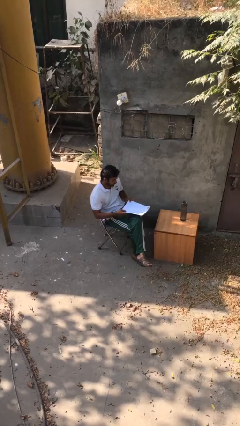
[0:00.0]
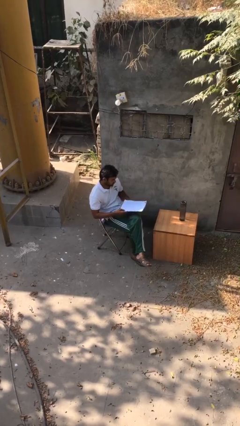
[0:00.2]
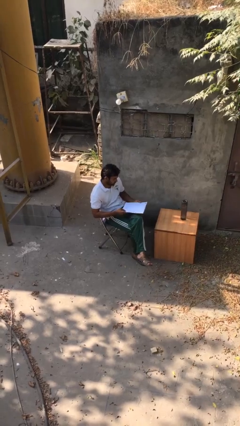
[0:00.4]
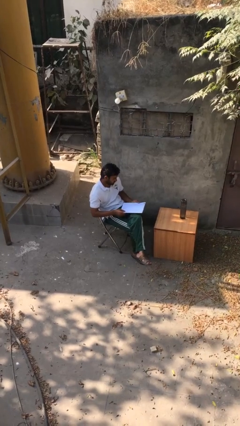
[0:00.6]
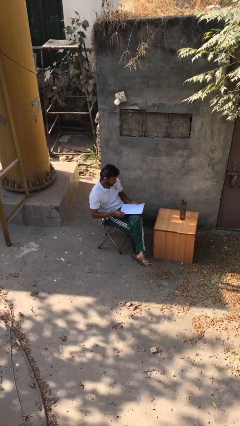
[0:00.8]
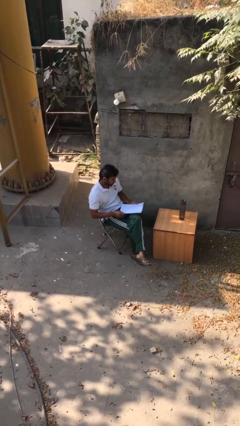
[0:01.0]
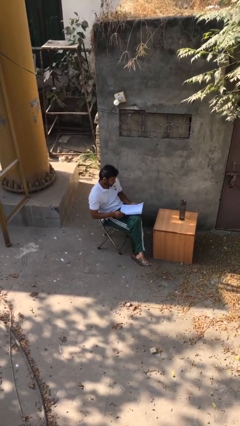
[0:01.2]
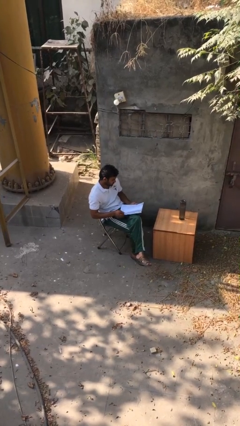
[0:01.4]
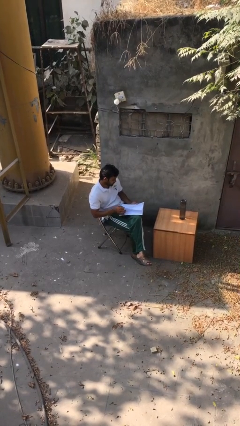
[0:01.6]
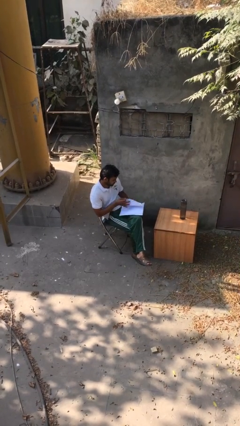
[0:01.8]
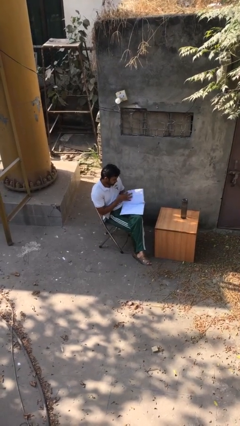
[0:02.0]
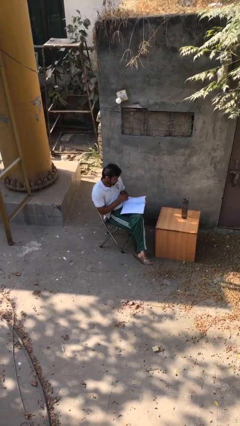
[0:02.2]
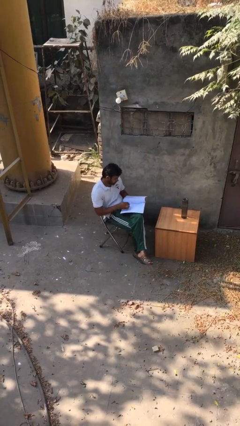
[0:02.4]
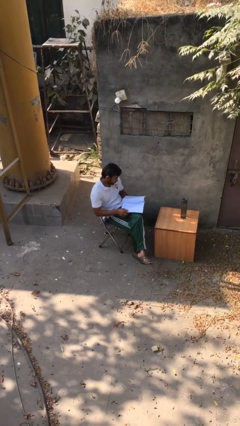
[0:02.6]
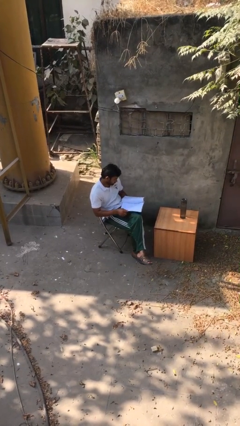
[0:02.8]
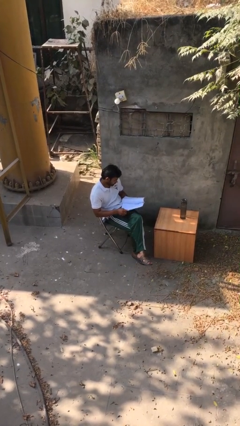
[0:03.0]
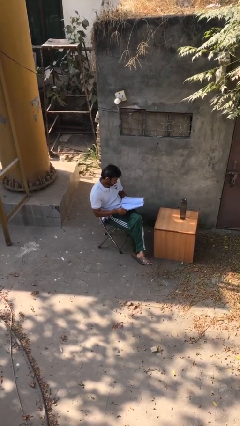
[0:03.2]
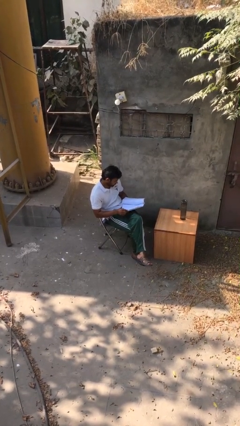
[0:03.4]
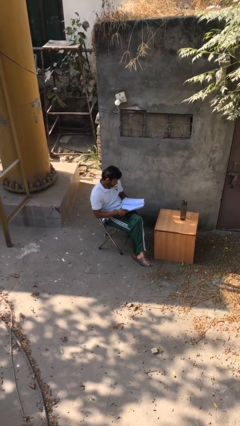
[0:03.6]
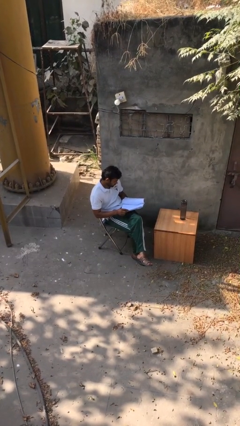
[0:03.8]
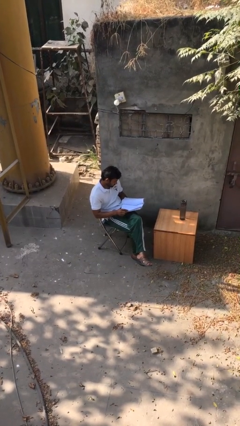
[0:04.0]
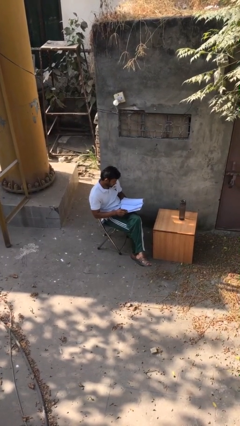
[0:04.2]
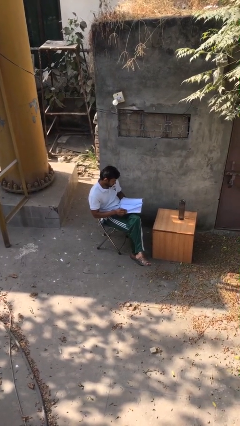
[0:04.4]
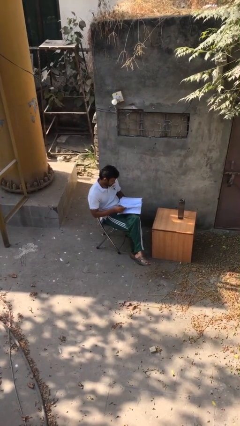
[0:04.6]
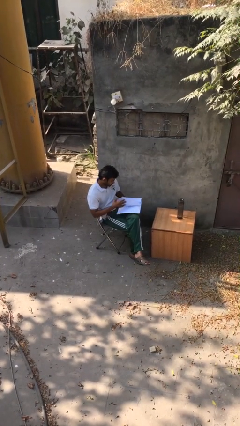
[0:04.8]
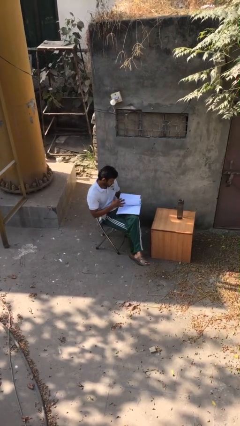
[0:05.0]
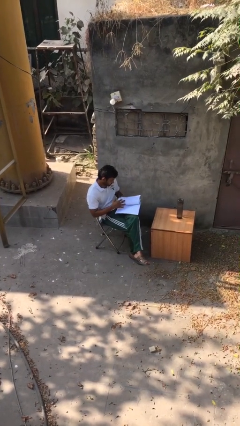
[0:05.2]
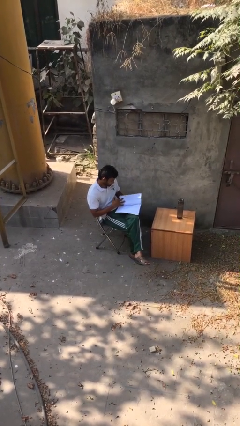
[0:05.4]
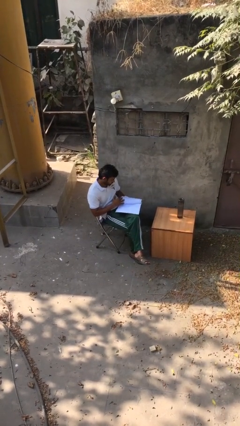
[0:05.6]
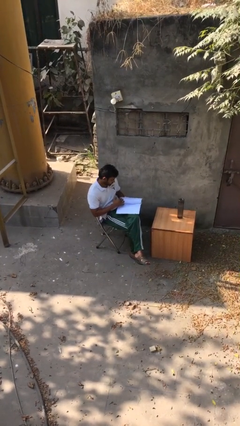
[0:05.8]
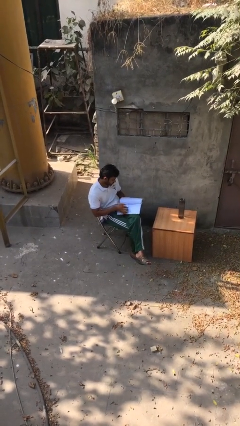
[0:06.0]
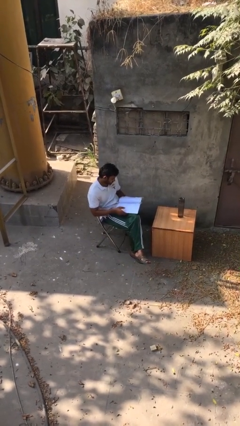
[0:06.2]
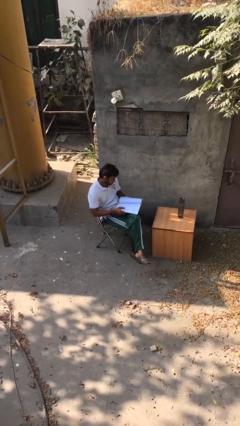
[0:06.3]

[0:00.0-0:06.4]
person reads document

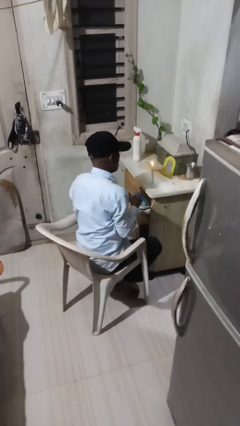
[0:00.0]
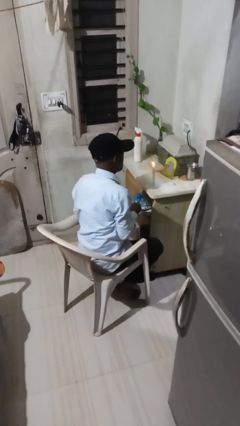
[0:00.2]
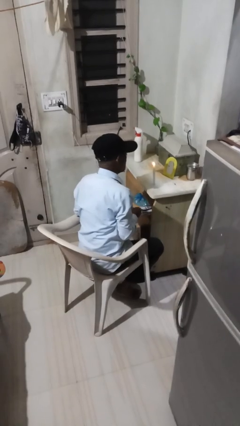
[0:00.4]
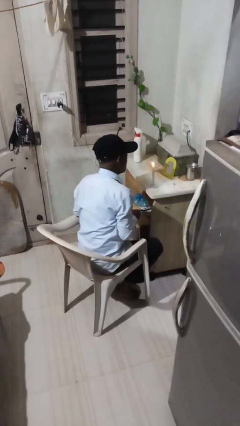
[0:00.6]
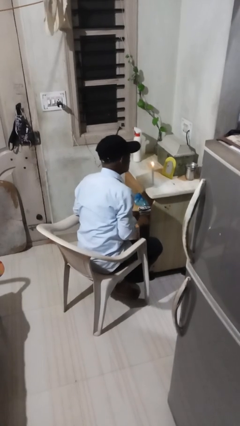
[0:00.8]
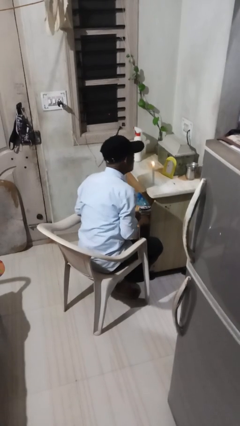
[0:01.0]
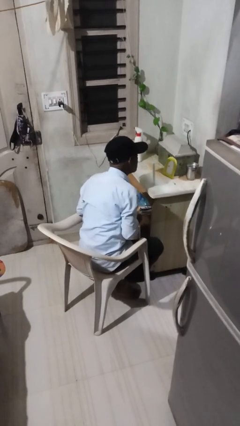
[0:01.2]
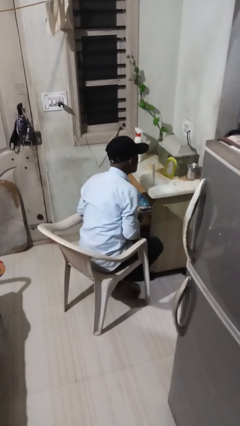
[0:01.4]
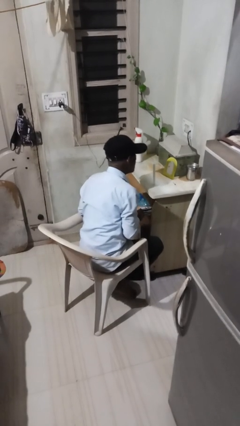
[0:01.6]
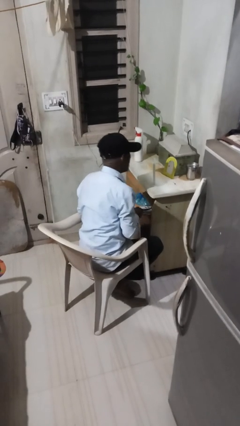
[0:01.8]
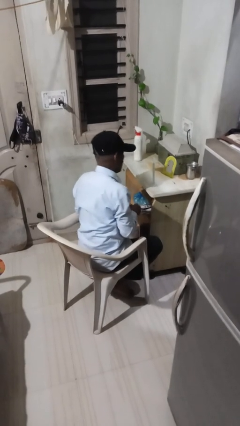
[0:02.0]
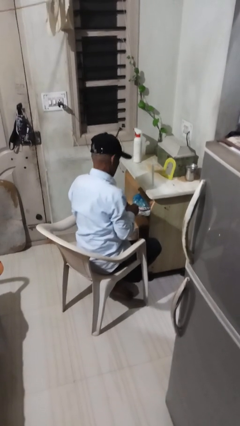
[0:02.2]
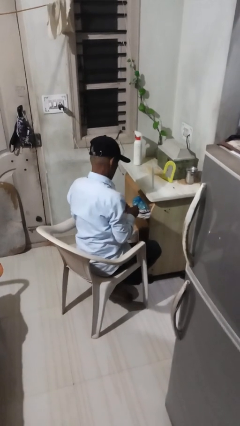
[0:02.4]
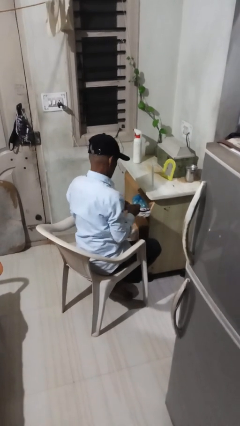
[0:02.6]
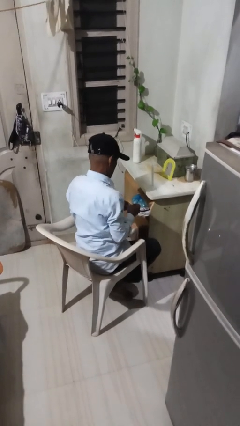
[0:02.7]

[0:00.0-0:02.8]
person extinguishes candle

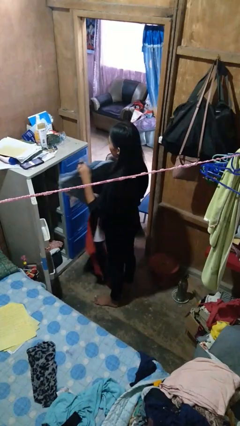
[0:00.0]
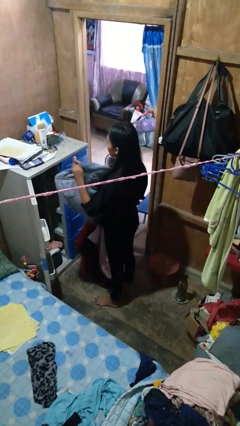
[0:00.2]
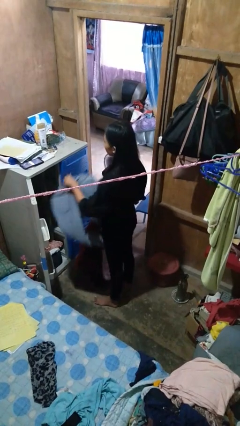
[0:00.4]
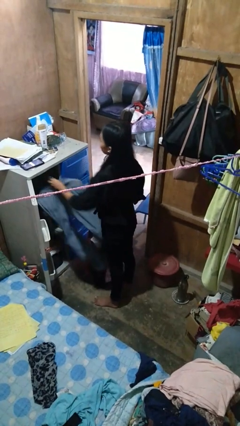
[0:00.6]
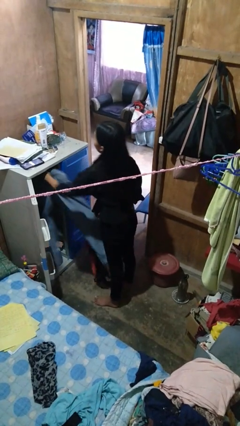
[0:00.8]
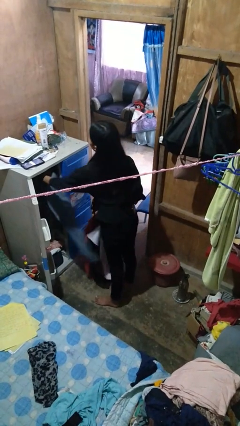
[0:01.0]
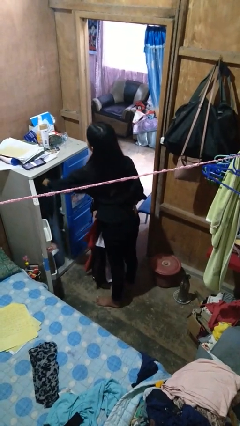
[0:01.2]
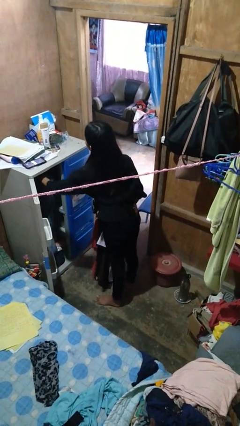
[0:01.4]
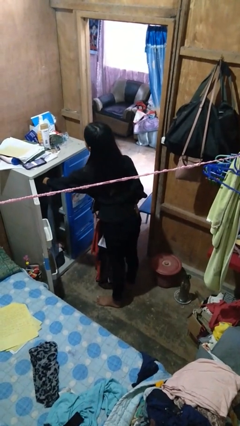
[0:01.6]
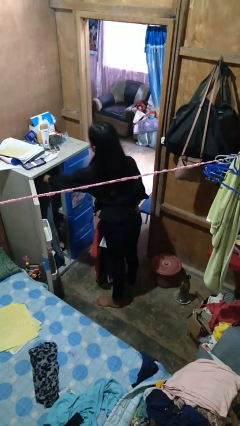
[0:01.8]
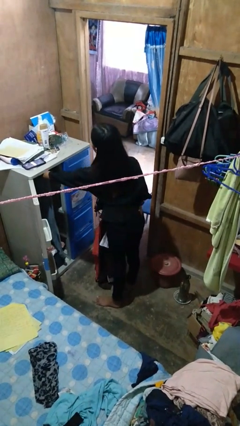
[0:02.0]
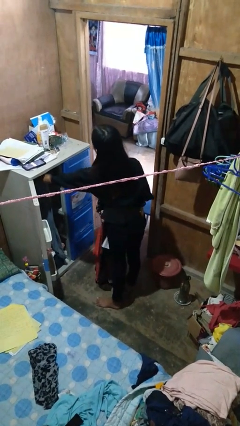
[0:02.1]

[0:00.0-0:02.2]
person puts clothes into closet

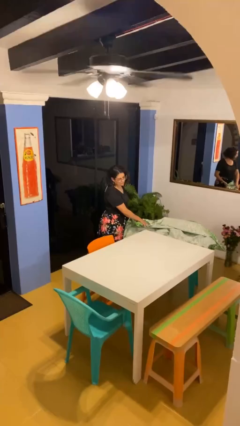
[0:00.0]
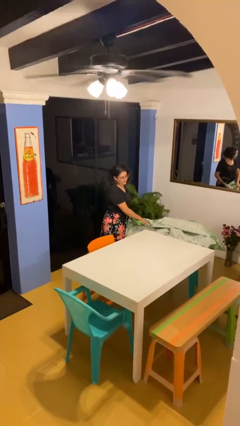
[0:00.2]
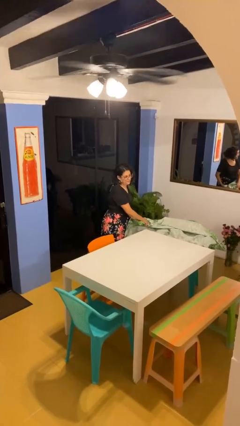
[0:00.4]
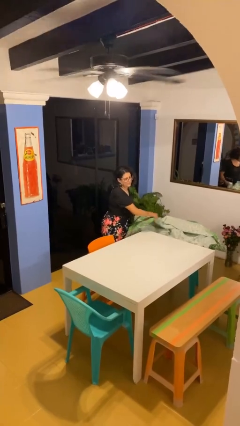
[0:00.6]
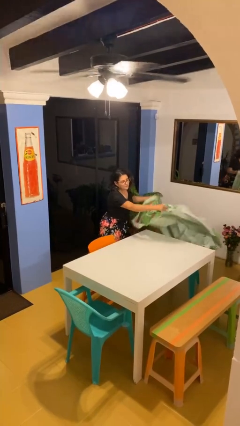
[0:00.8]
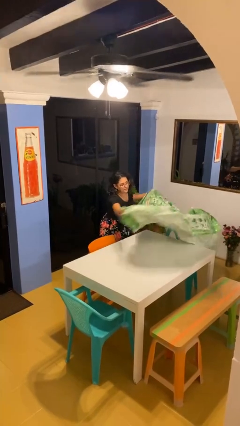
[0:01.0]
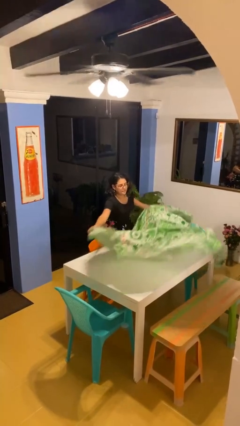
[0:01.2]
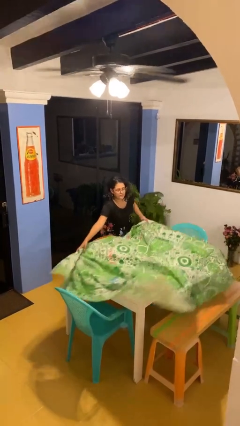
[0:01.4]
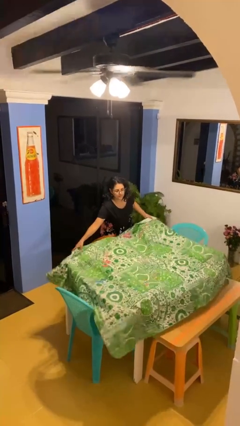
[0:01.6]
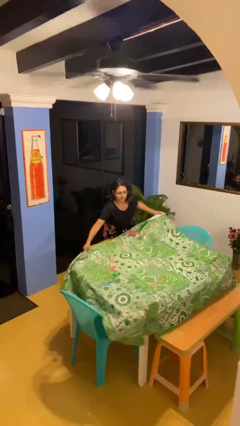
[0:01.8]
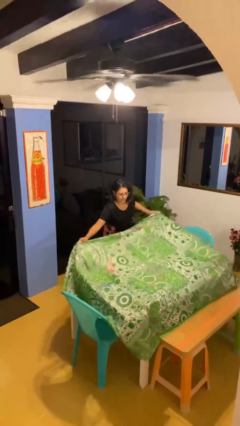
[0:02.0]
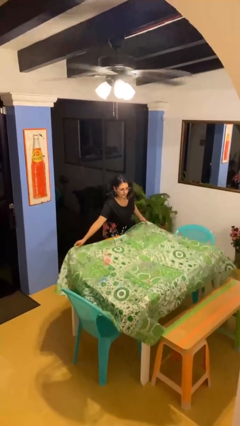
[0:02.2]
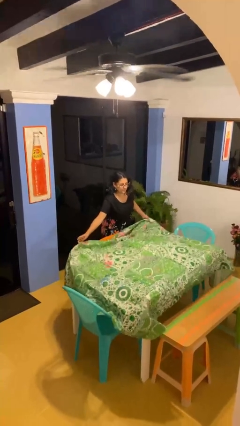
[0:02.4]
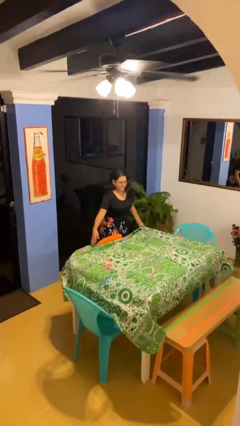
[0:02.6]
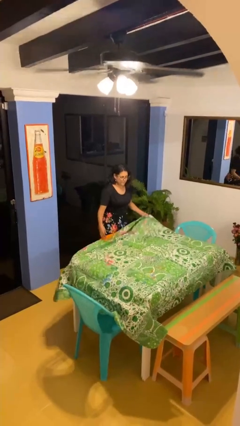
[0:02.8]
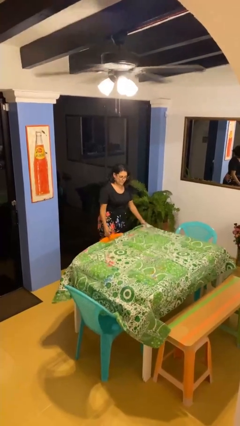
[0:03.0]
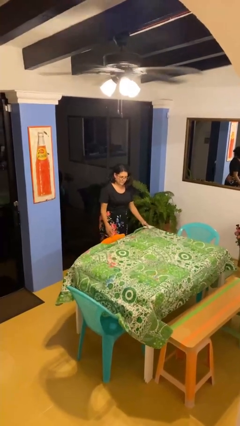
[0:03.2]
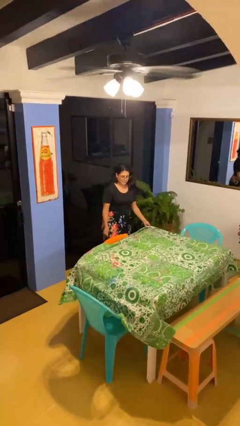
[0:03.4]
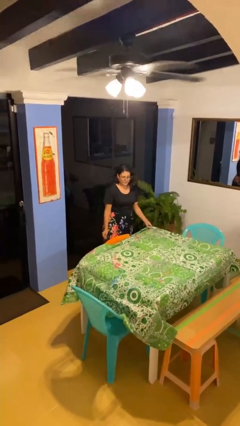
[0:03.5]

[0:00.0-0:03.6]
person spreads tablecloth

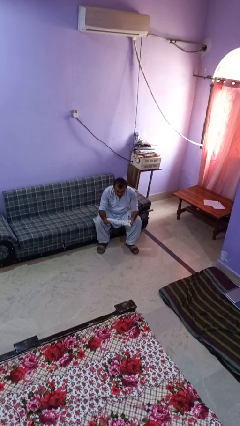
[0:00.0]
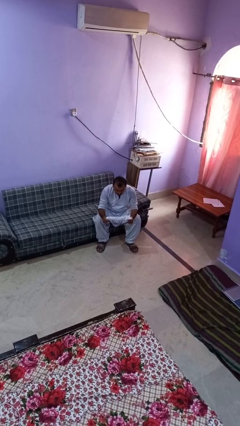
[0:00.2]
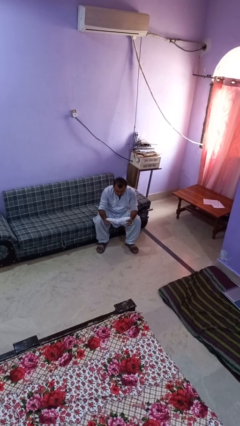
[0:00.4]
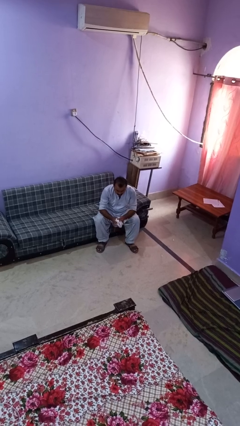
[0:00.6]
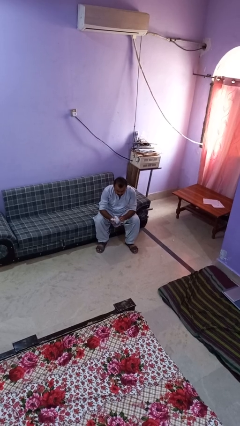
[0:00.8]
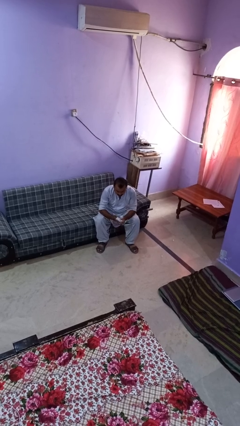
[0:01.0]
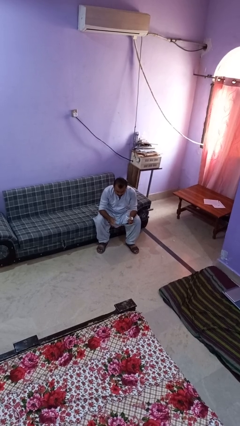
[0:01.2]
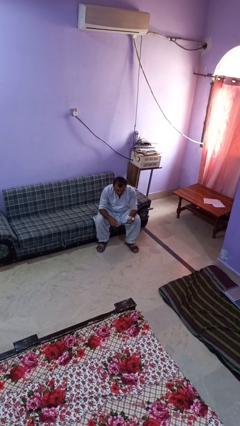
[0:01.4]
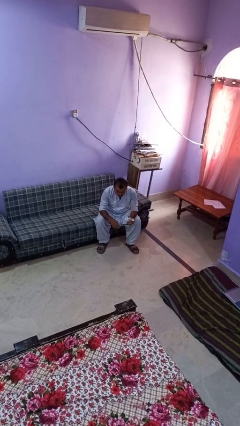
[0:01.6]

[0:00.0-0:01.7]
person crumples paper

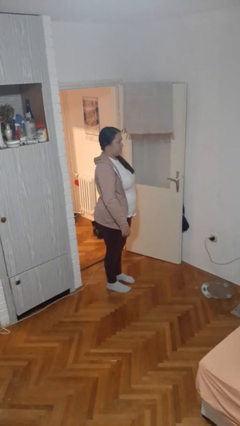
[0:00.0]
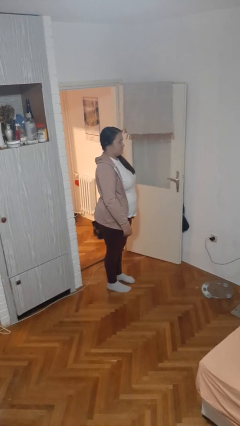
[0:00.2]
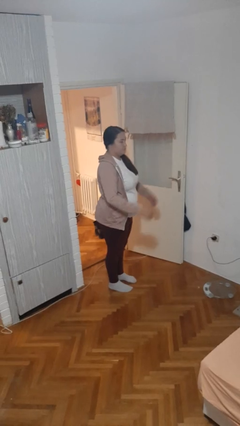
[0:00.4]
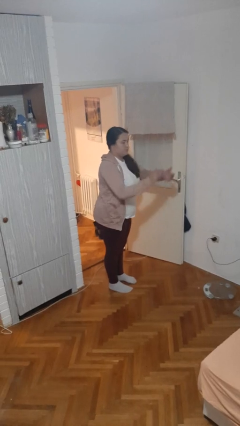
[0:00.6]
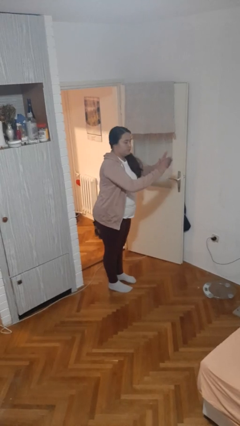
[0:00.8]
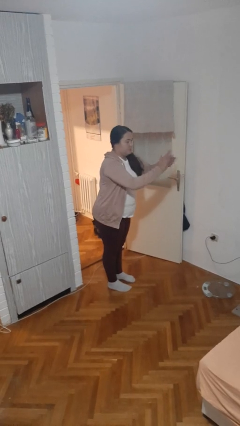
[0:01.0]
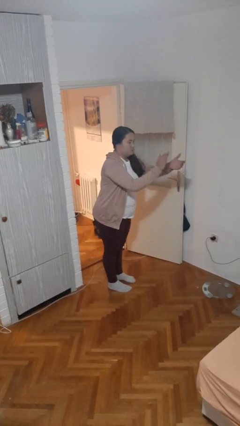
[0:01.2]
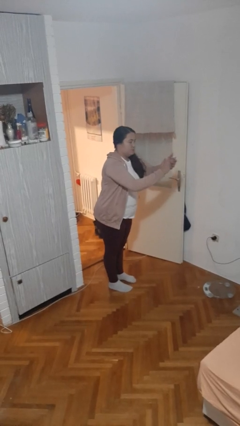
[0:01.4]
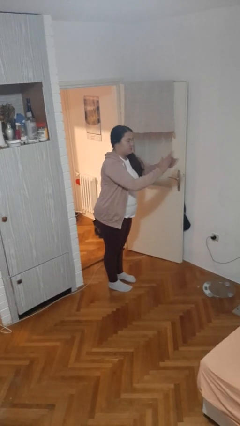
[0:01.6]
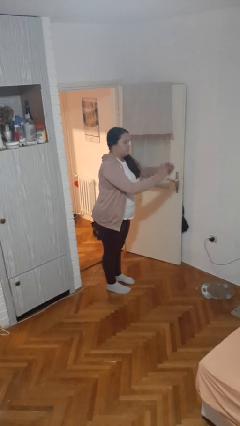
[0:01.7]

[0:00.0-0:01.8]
person claps hands
